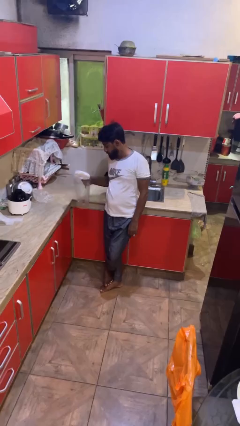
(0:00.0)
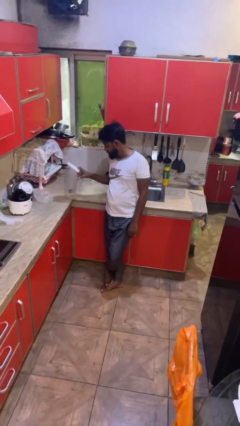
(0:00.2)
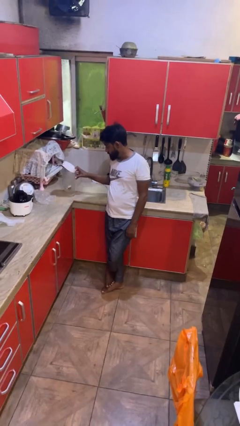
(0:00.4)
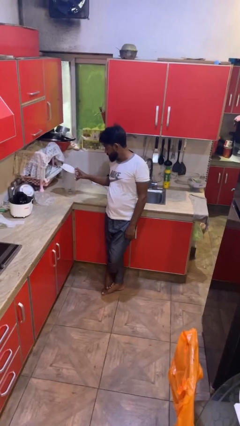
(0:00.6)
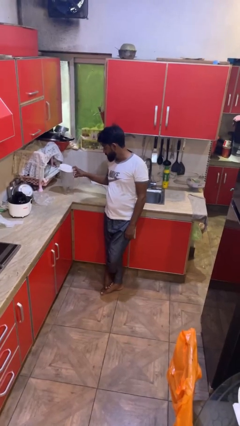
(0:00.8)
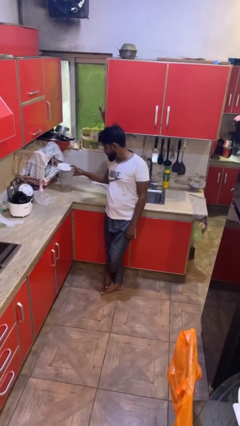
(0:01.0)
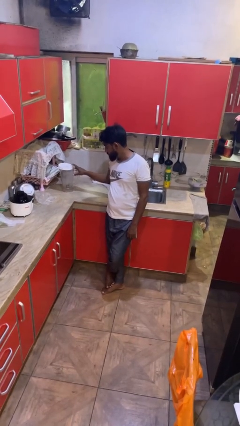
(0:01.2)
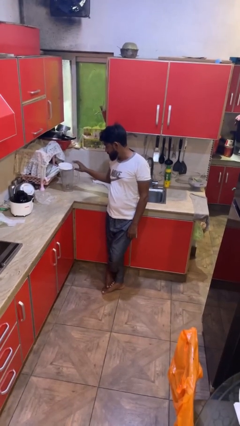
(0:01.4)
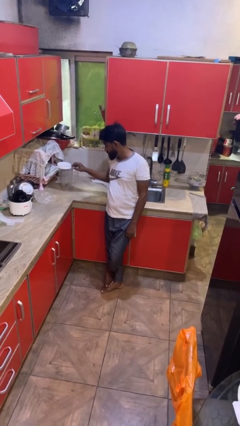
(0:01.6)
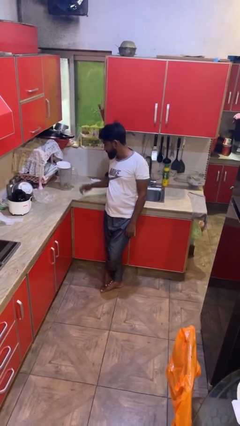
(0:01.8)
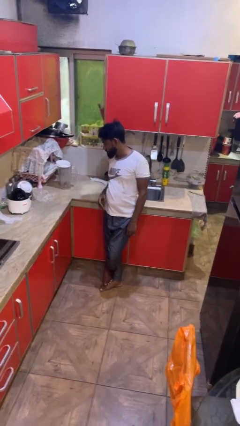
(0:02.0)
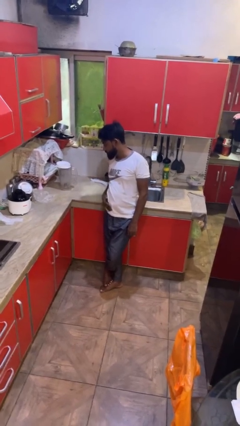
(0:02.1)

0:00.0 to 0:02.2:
person puts down object on countertop

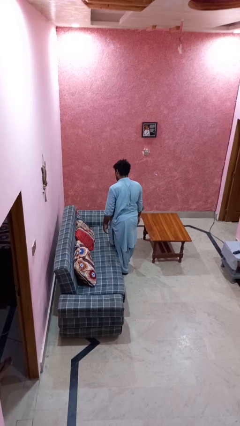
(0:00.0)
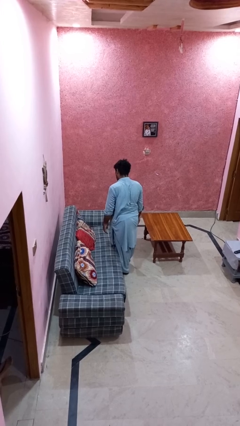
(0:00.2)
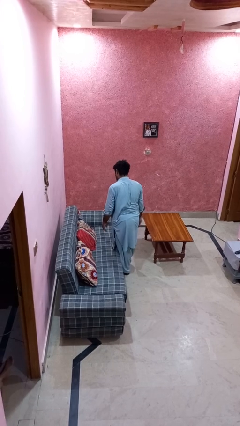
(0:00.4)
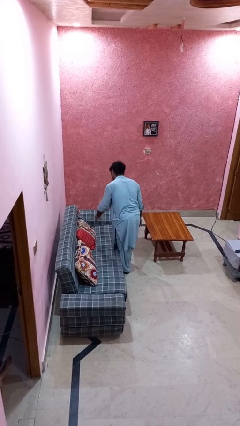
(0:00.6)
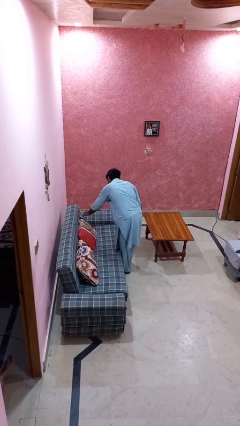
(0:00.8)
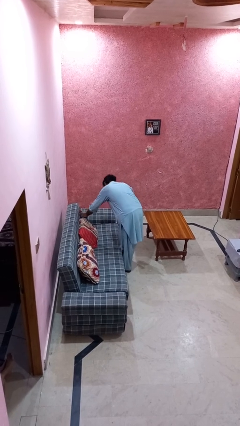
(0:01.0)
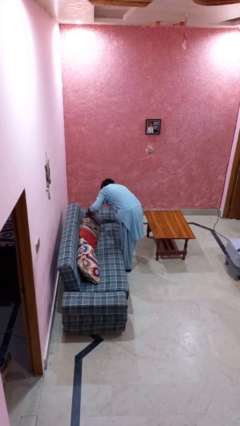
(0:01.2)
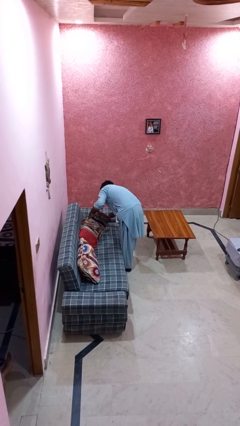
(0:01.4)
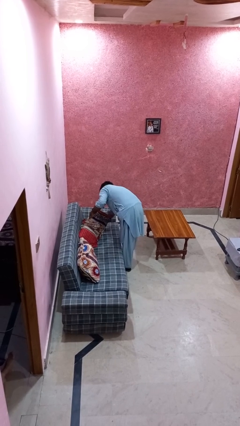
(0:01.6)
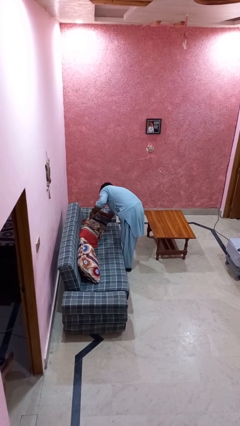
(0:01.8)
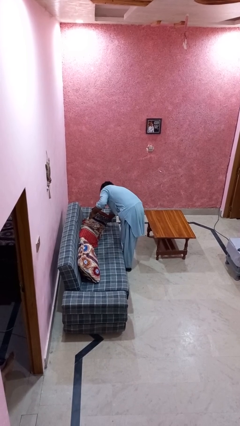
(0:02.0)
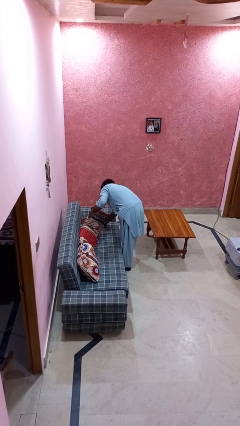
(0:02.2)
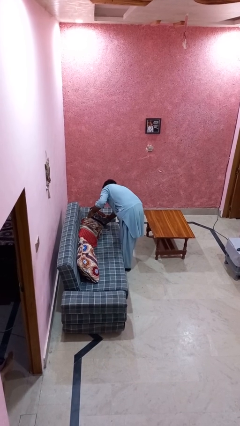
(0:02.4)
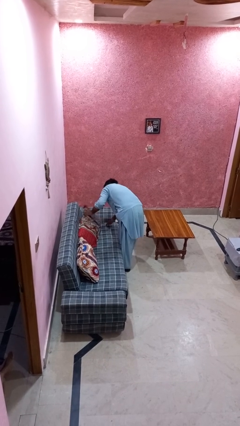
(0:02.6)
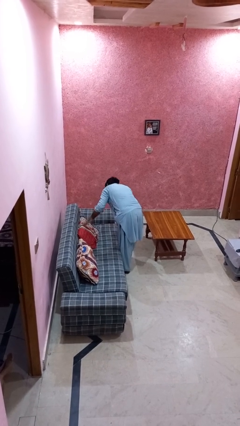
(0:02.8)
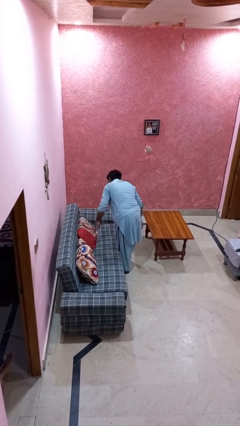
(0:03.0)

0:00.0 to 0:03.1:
person searches in couch

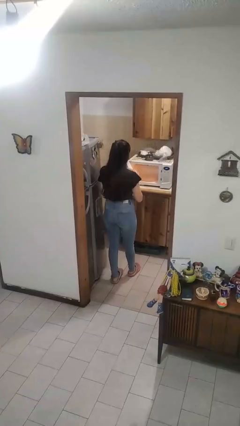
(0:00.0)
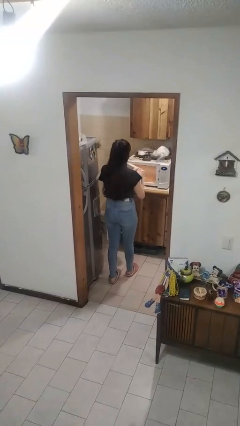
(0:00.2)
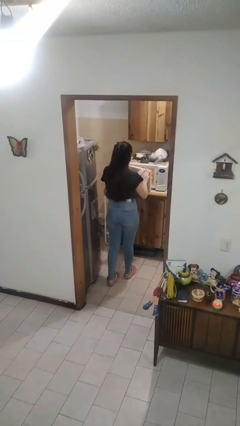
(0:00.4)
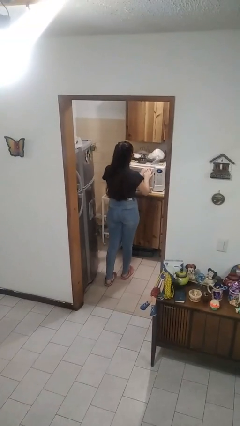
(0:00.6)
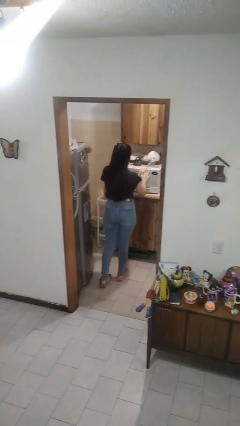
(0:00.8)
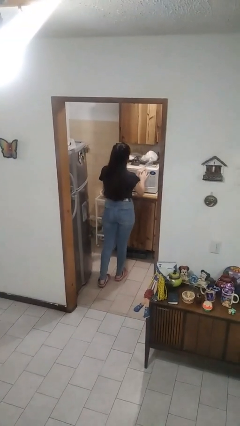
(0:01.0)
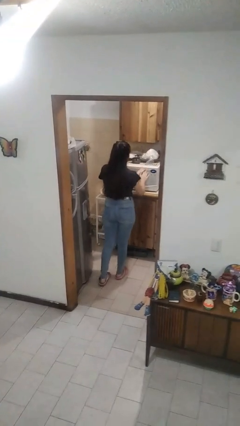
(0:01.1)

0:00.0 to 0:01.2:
person closes microwave

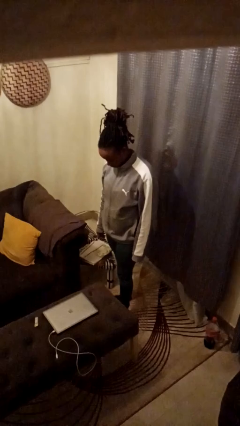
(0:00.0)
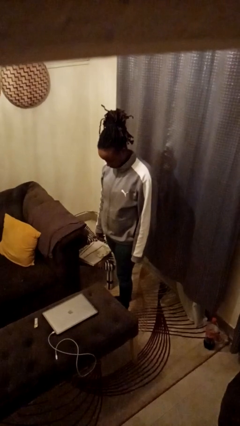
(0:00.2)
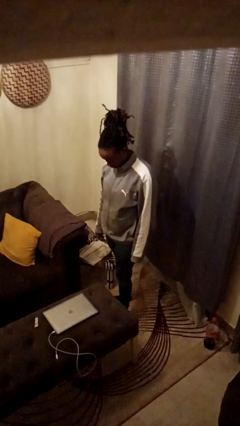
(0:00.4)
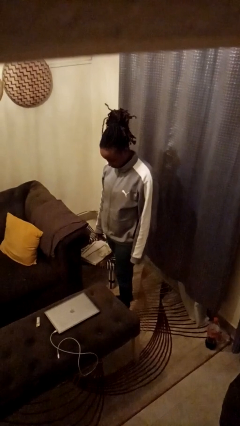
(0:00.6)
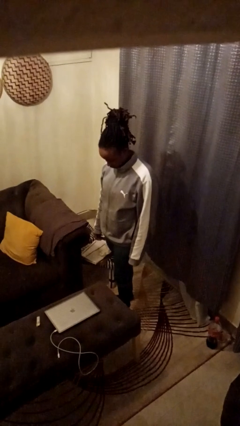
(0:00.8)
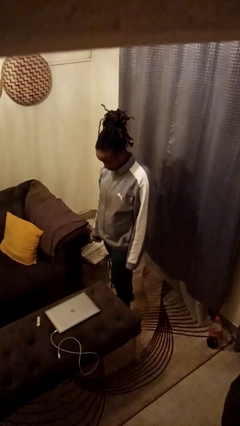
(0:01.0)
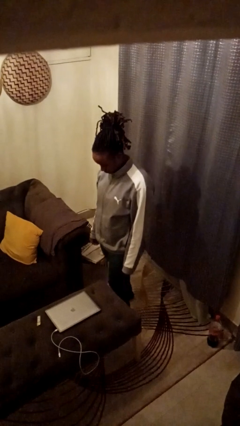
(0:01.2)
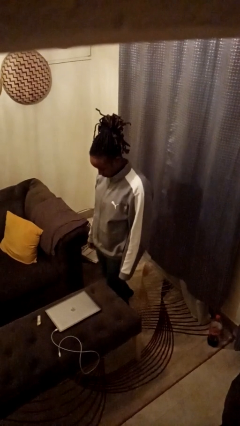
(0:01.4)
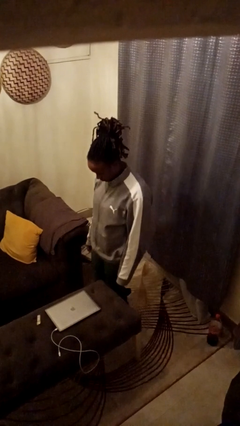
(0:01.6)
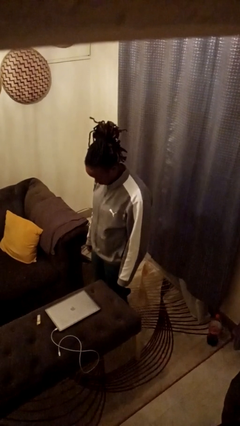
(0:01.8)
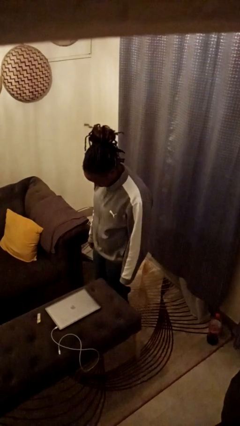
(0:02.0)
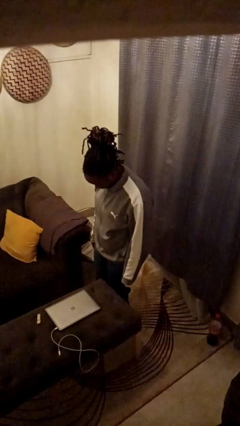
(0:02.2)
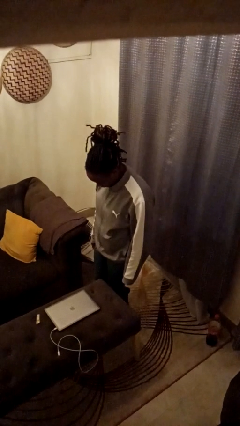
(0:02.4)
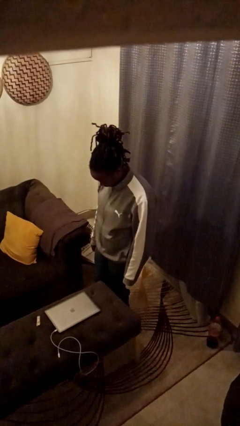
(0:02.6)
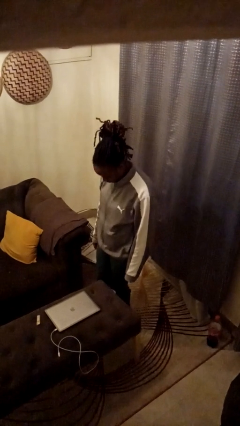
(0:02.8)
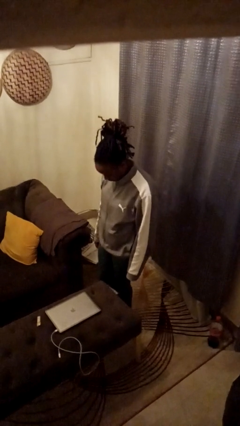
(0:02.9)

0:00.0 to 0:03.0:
person bumps into table

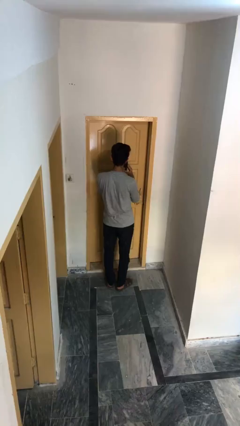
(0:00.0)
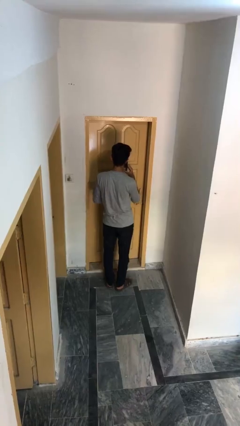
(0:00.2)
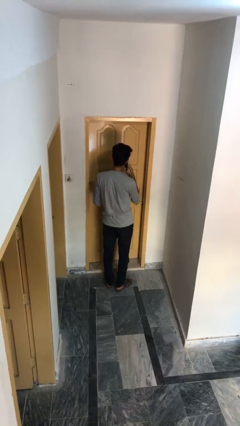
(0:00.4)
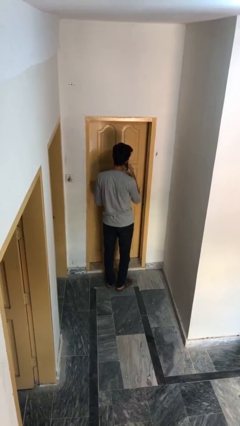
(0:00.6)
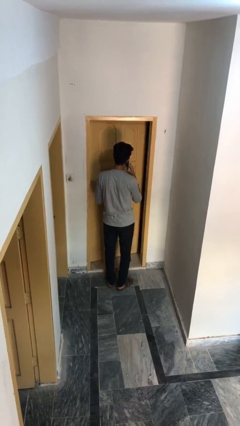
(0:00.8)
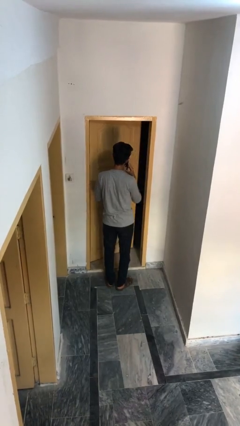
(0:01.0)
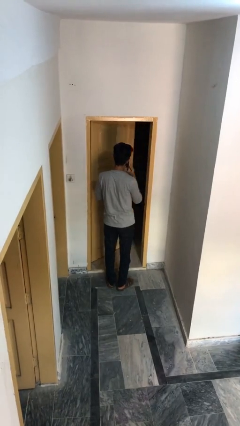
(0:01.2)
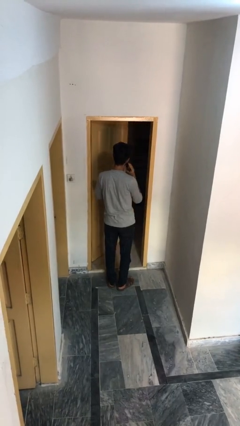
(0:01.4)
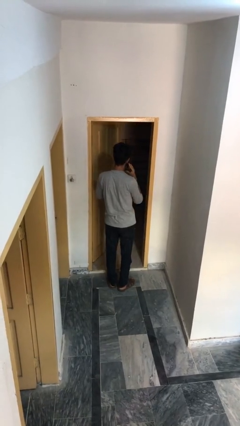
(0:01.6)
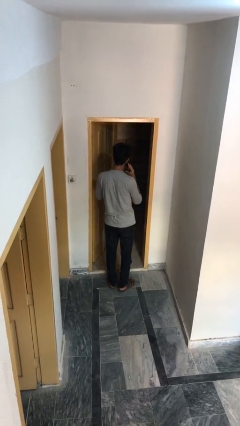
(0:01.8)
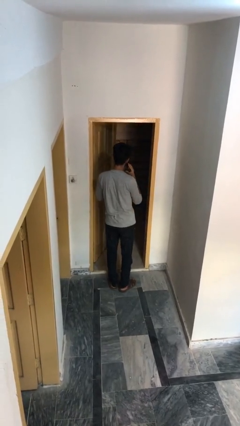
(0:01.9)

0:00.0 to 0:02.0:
person opens facility door

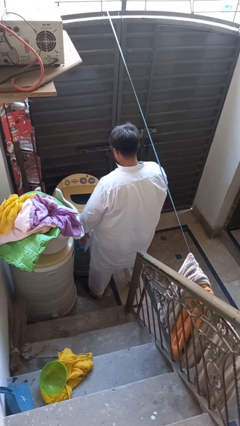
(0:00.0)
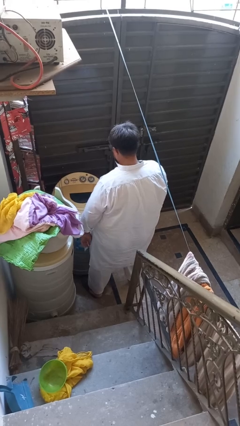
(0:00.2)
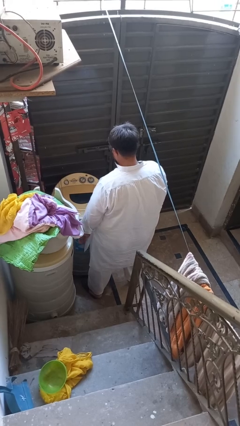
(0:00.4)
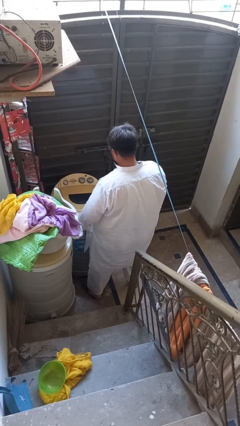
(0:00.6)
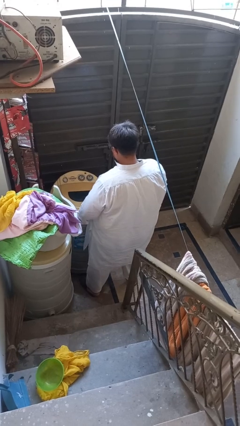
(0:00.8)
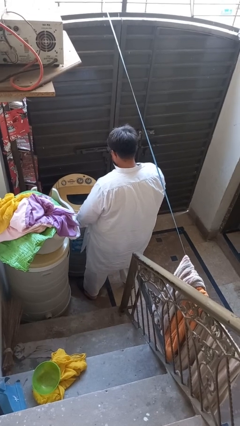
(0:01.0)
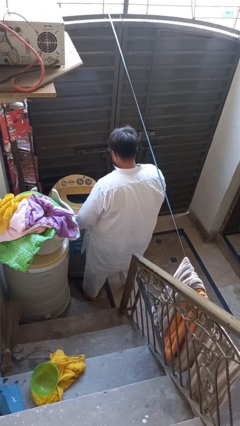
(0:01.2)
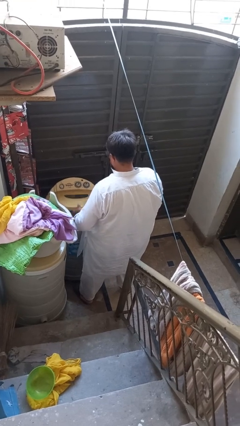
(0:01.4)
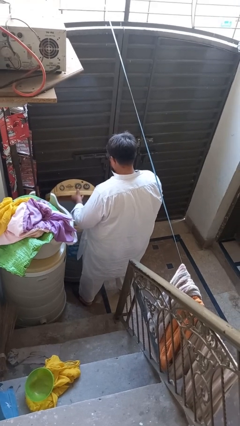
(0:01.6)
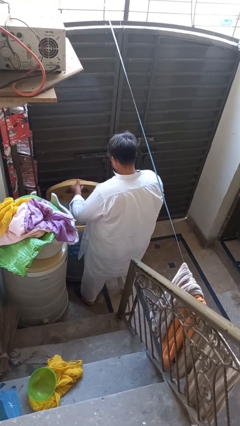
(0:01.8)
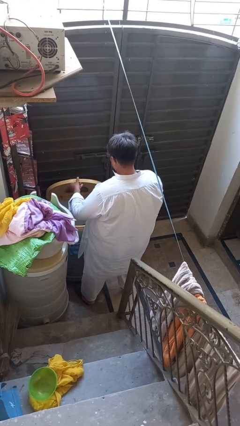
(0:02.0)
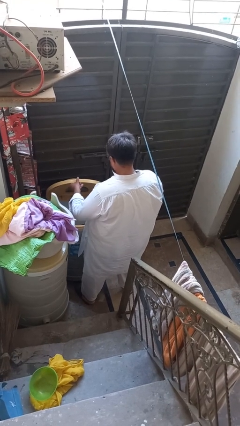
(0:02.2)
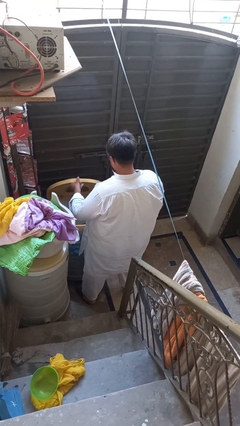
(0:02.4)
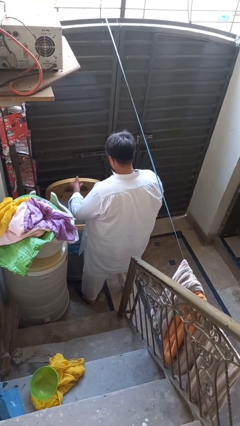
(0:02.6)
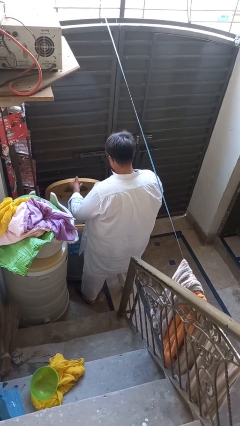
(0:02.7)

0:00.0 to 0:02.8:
person opens clothes washer

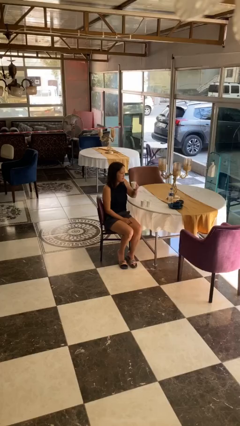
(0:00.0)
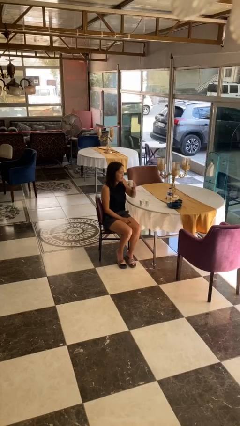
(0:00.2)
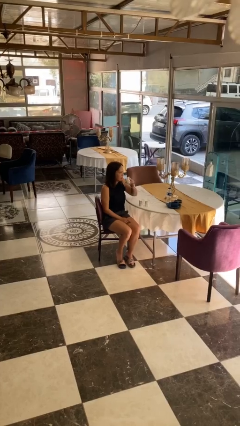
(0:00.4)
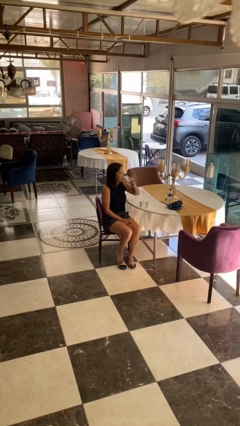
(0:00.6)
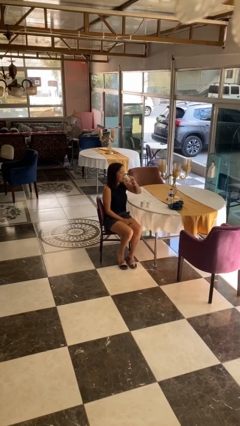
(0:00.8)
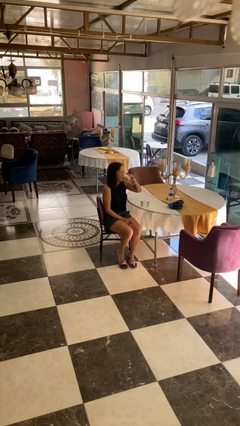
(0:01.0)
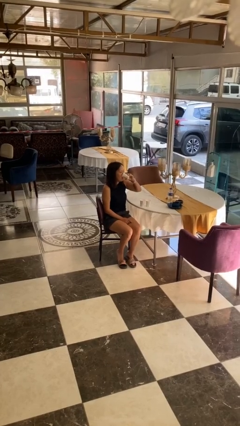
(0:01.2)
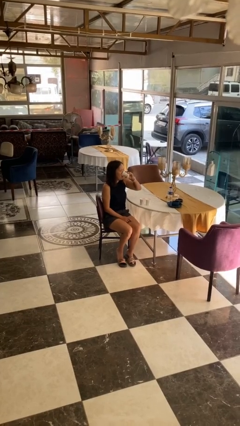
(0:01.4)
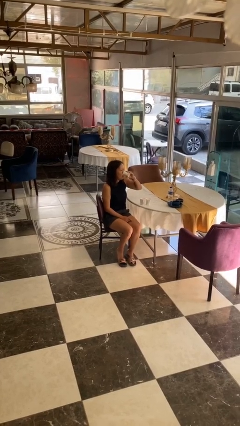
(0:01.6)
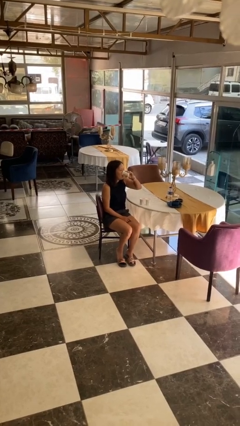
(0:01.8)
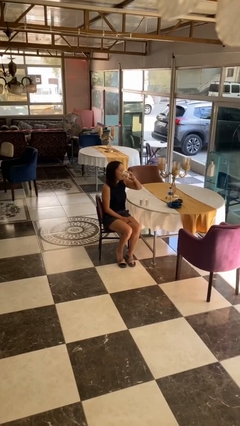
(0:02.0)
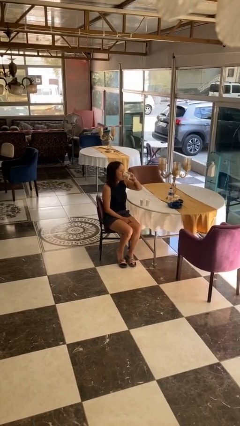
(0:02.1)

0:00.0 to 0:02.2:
person drinks from shotglass

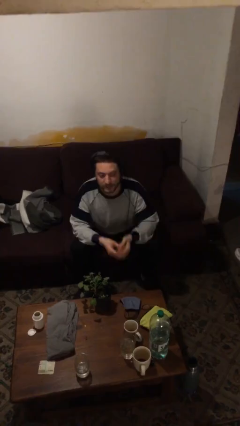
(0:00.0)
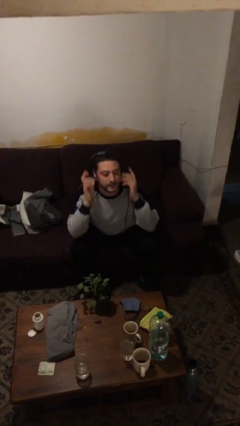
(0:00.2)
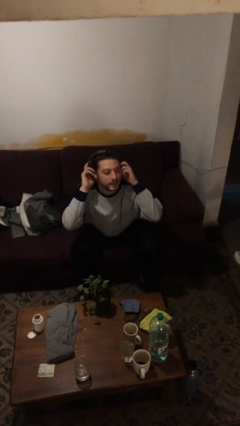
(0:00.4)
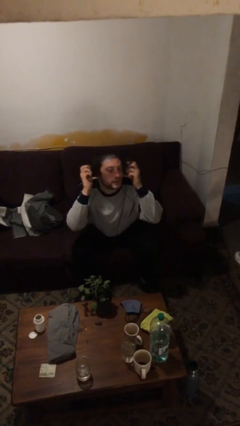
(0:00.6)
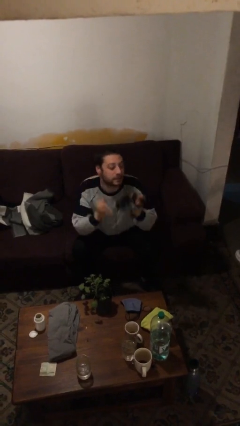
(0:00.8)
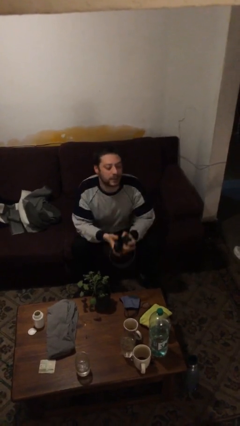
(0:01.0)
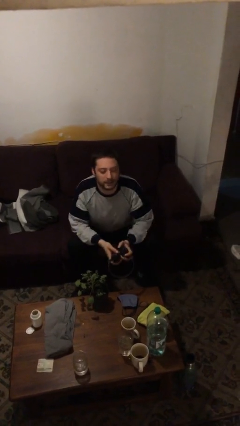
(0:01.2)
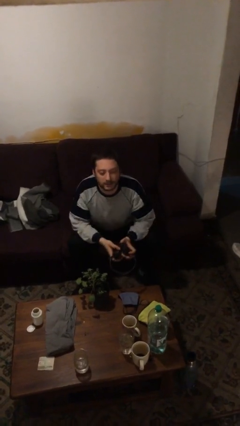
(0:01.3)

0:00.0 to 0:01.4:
person takes off headphones
